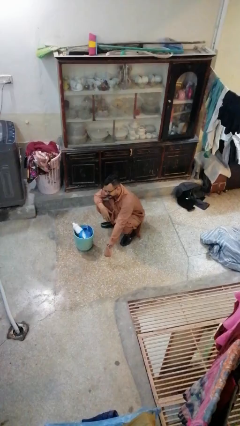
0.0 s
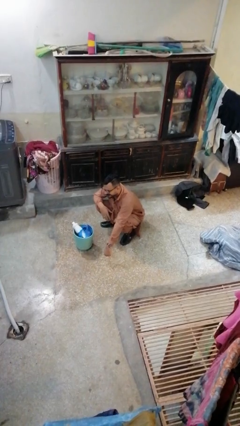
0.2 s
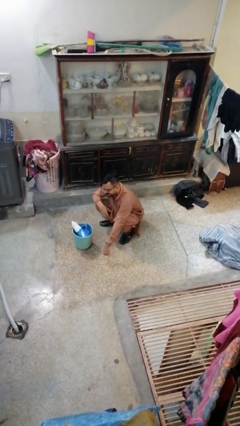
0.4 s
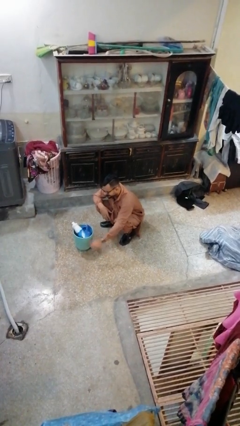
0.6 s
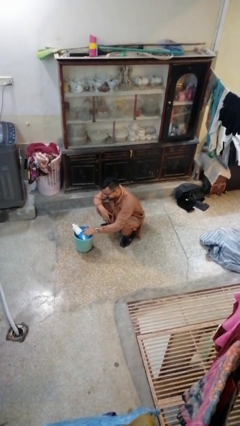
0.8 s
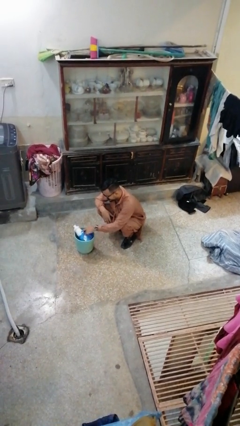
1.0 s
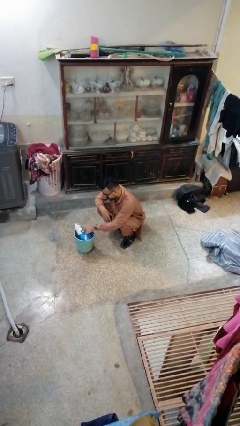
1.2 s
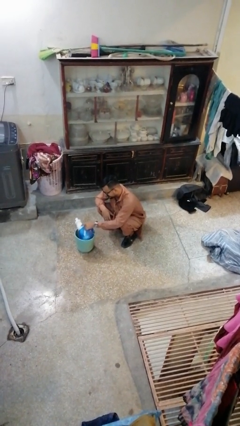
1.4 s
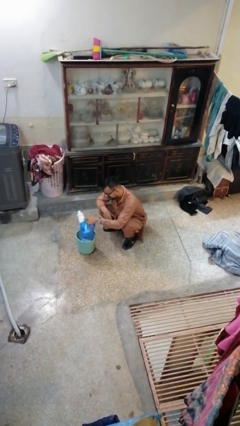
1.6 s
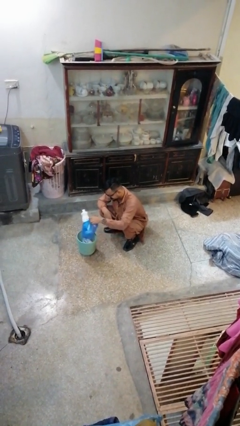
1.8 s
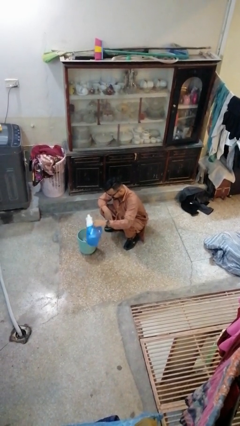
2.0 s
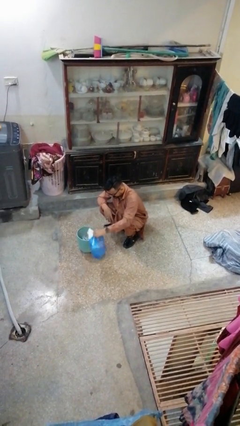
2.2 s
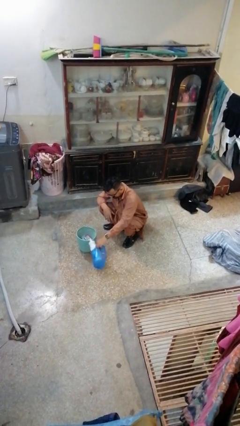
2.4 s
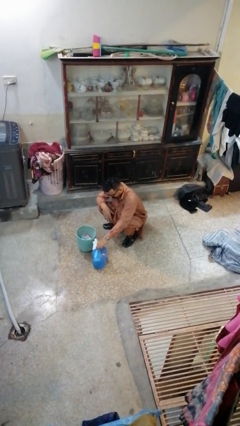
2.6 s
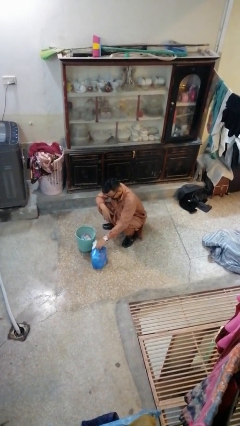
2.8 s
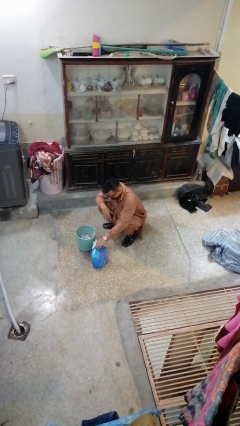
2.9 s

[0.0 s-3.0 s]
person removes trashbag from trashcan

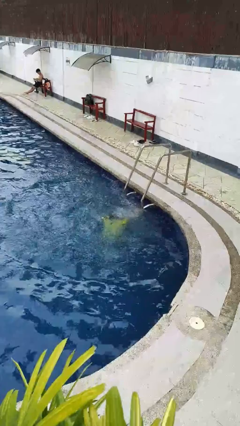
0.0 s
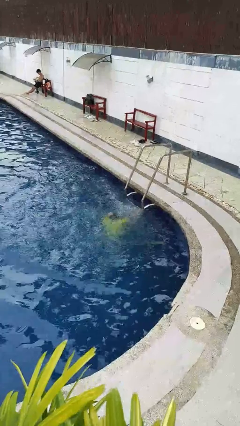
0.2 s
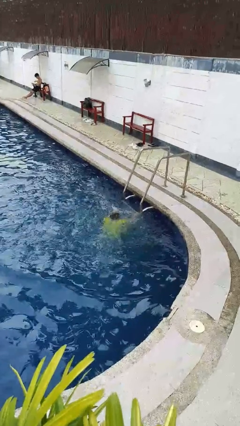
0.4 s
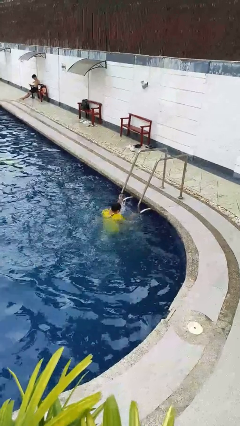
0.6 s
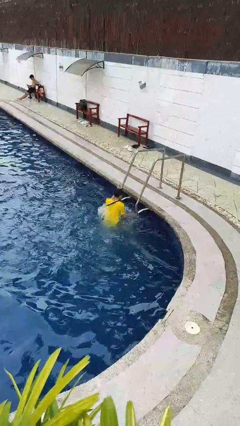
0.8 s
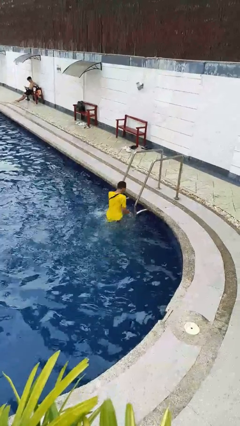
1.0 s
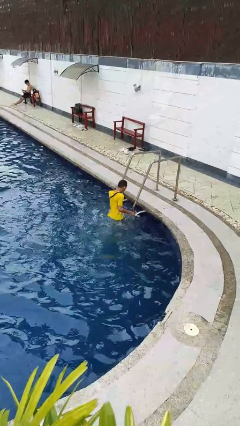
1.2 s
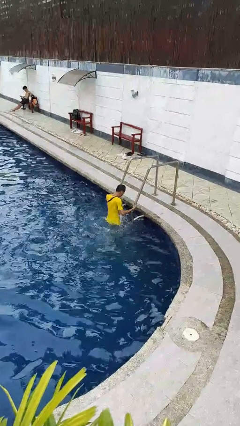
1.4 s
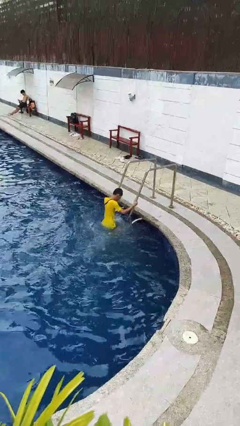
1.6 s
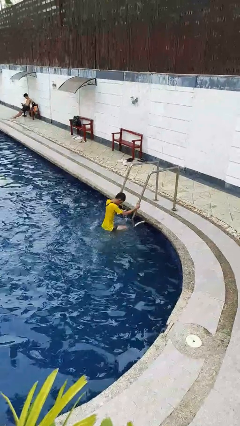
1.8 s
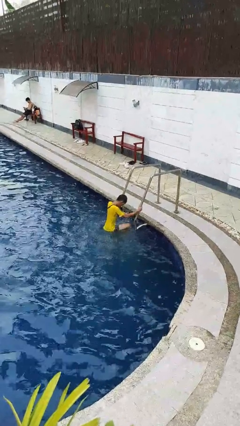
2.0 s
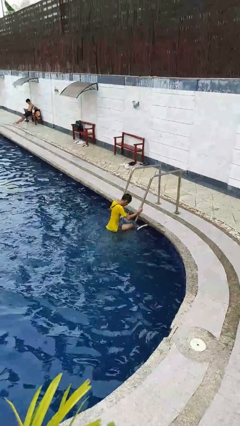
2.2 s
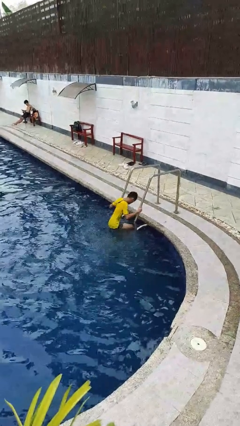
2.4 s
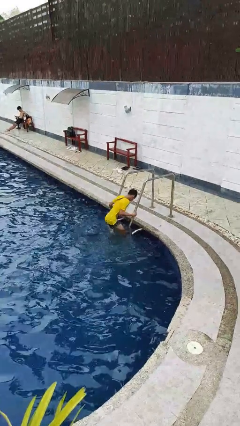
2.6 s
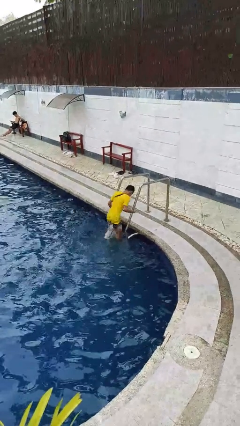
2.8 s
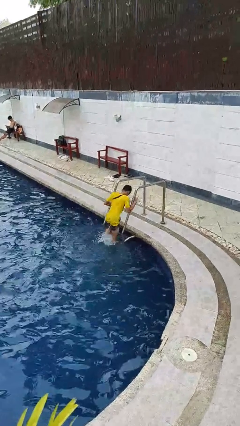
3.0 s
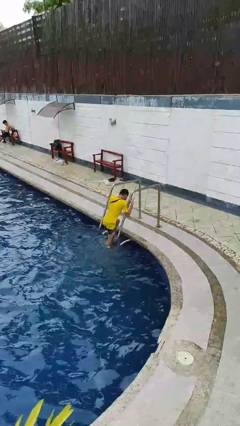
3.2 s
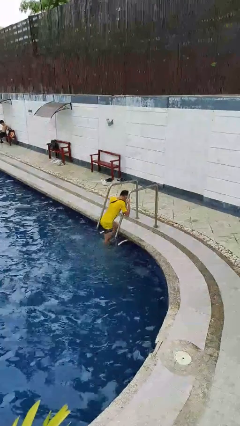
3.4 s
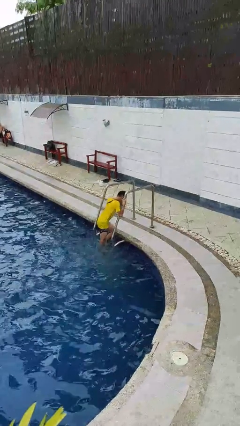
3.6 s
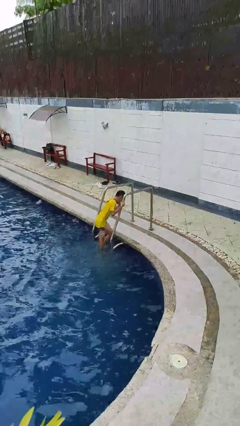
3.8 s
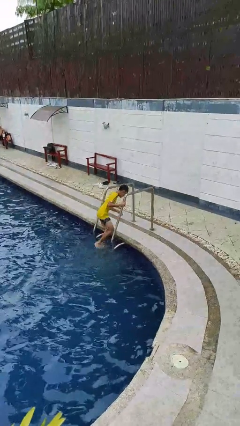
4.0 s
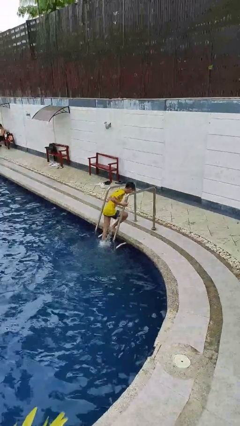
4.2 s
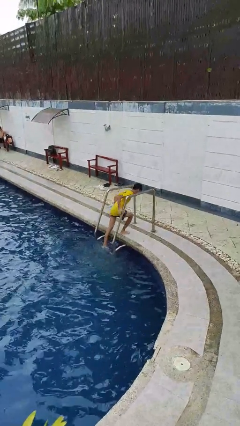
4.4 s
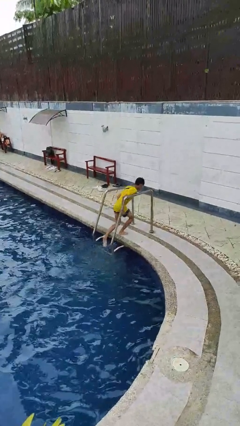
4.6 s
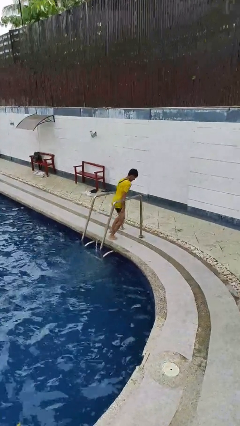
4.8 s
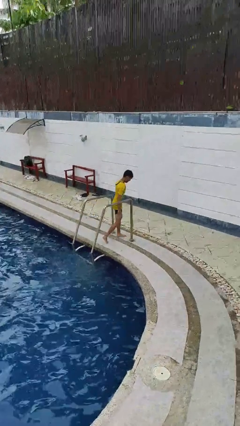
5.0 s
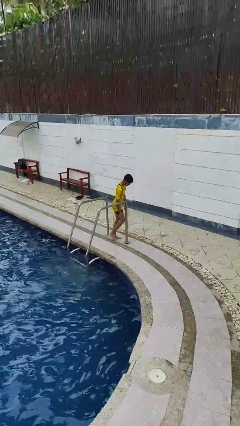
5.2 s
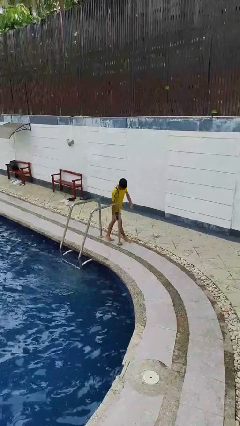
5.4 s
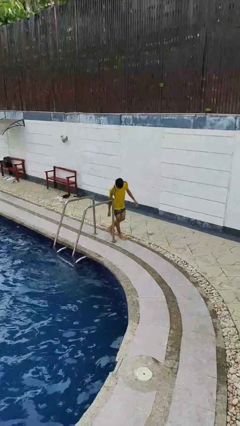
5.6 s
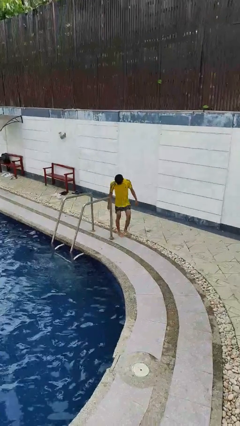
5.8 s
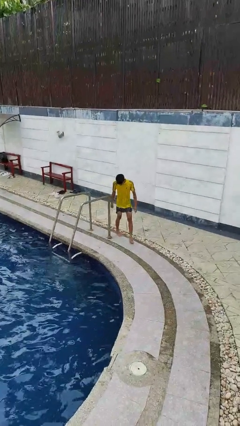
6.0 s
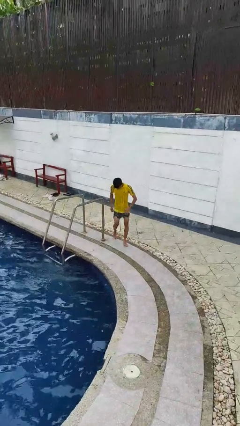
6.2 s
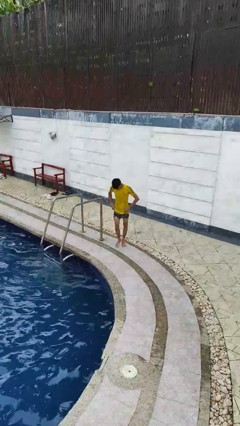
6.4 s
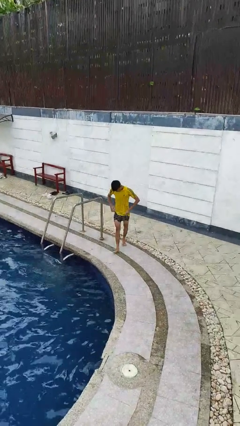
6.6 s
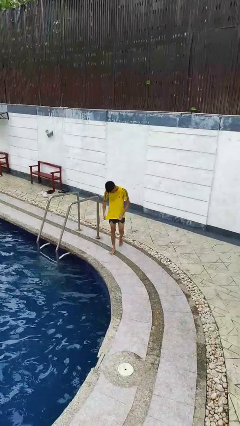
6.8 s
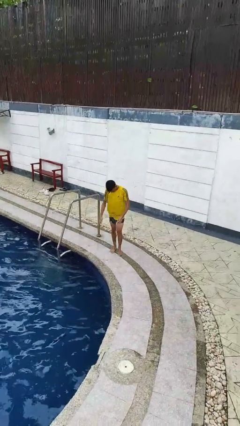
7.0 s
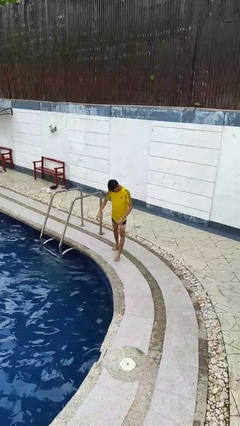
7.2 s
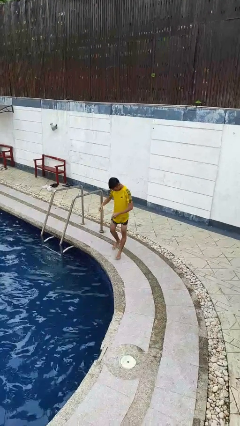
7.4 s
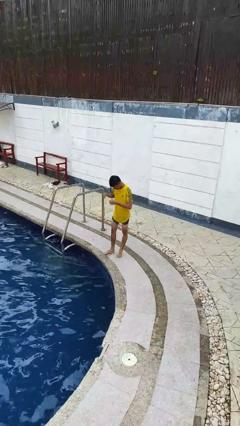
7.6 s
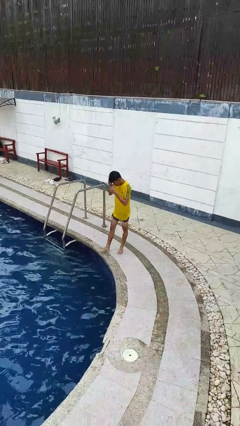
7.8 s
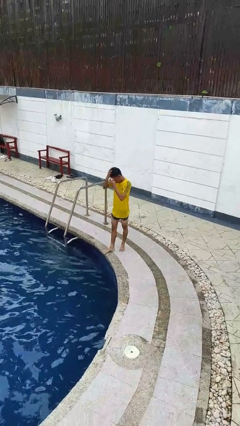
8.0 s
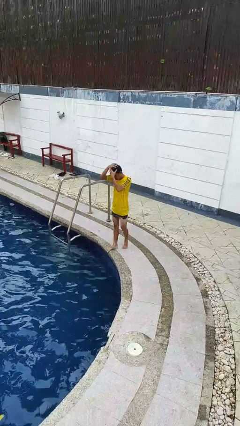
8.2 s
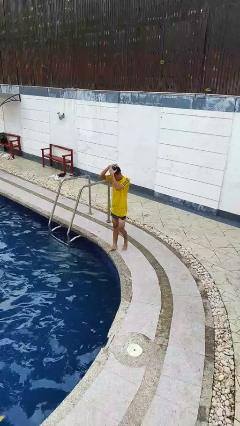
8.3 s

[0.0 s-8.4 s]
person exits pool

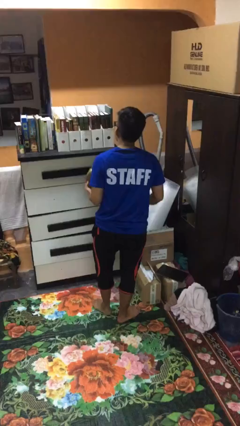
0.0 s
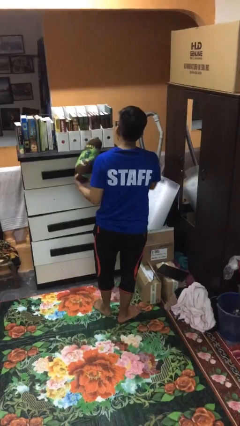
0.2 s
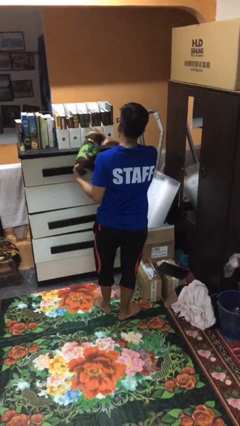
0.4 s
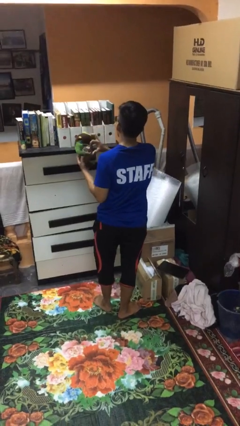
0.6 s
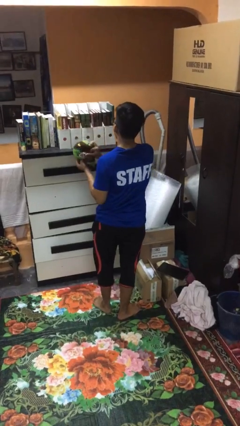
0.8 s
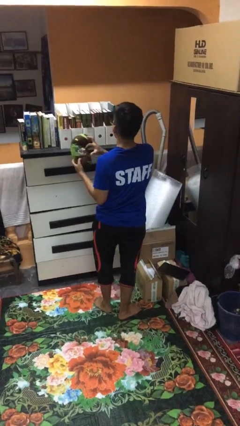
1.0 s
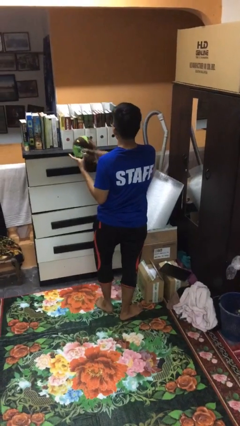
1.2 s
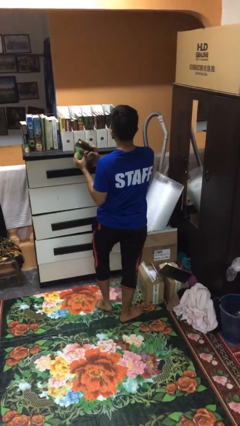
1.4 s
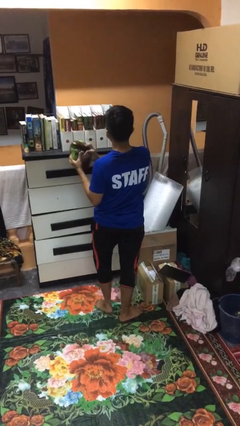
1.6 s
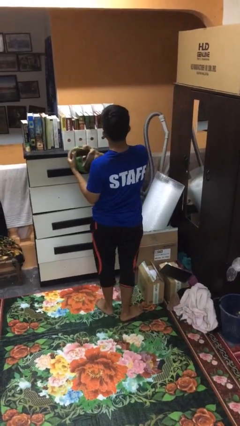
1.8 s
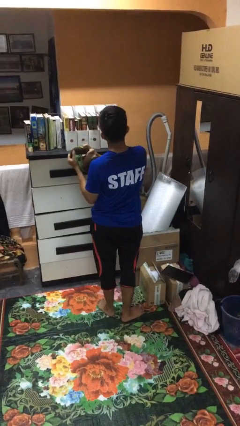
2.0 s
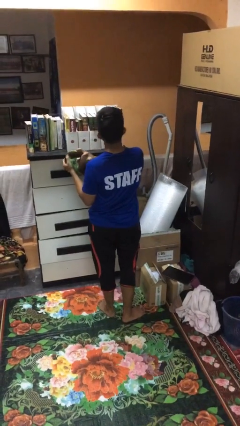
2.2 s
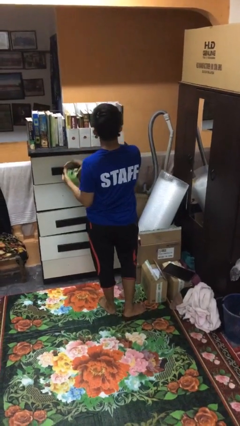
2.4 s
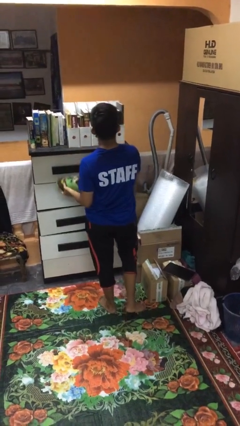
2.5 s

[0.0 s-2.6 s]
person squeezes object

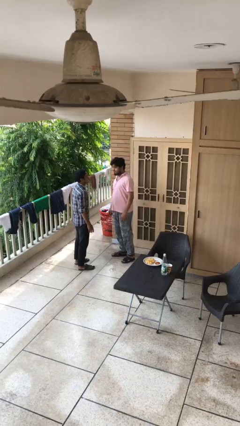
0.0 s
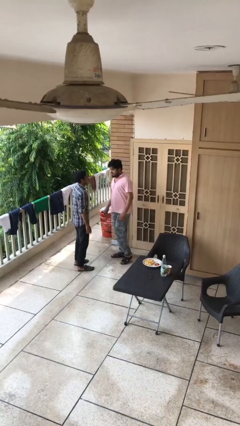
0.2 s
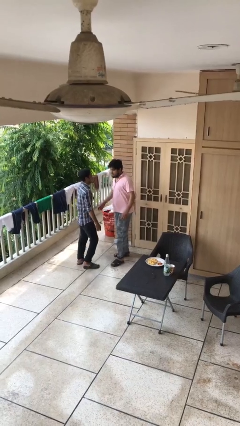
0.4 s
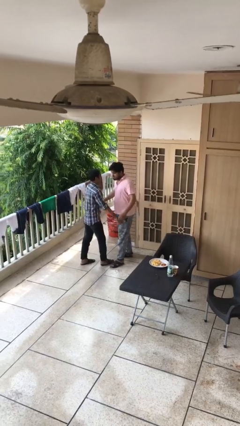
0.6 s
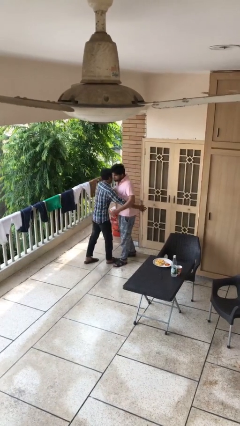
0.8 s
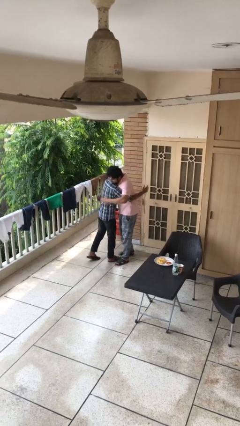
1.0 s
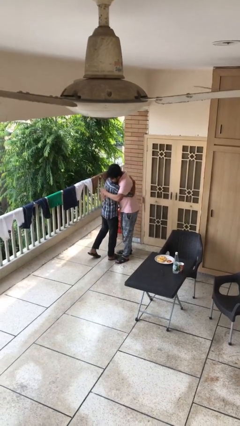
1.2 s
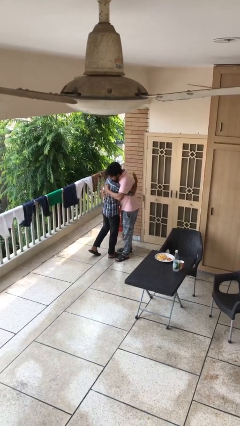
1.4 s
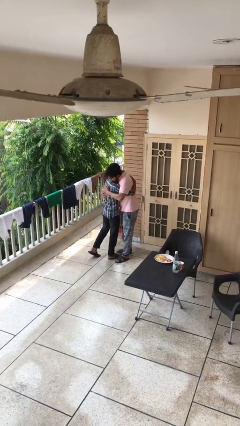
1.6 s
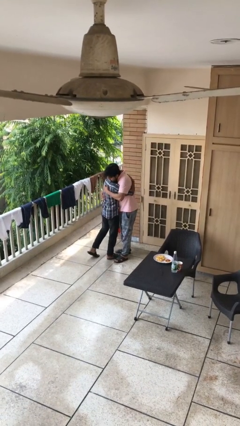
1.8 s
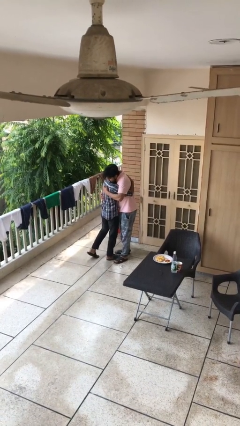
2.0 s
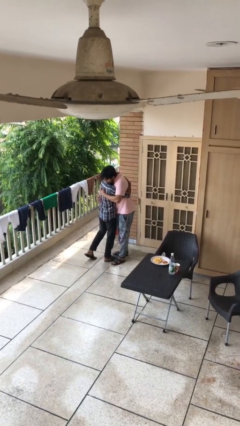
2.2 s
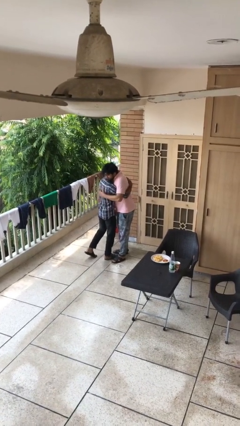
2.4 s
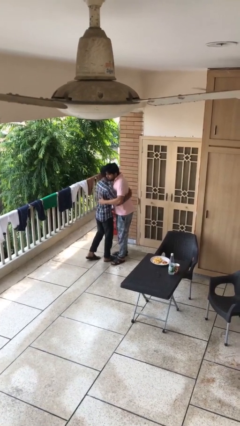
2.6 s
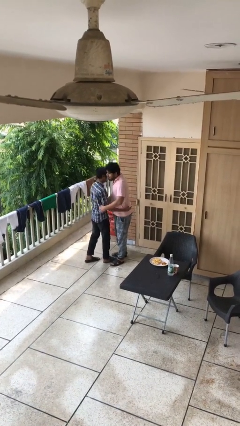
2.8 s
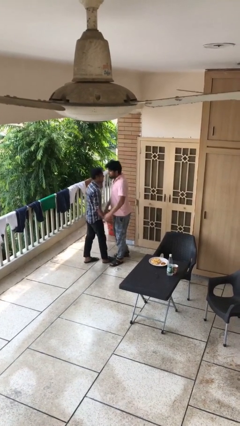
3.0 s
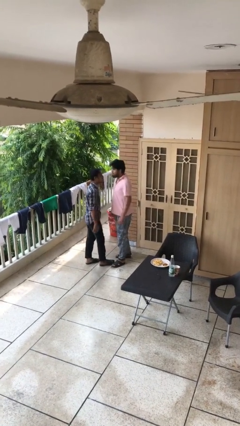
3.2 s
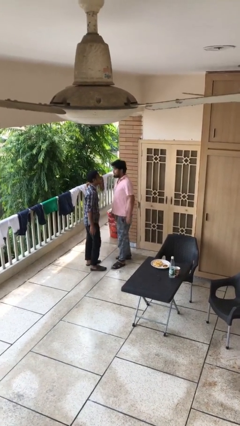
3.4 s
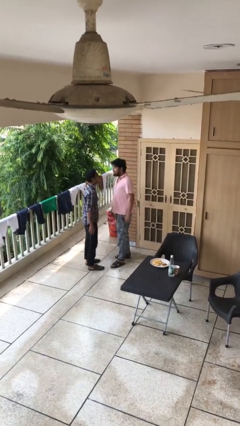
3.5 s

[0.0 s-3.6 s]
person embraces person

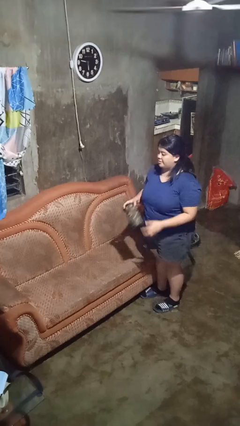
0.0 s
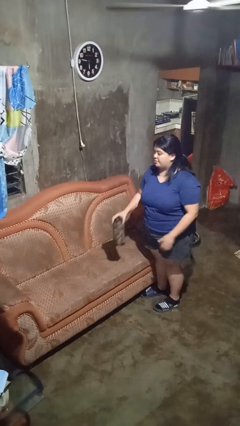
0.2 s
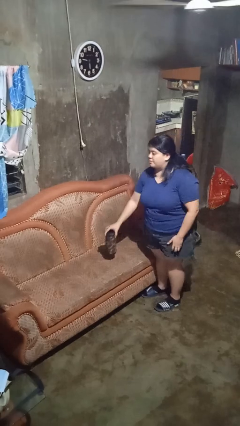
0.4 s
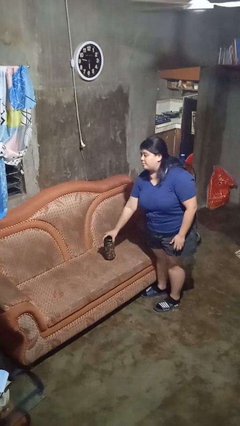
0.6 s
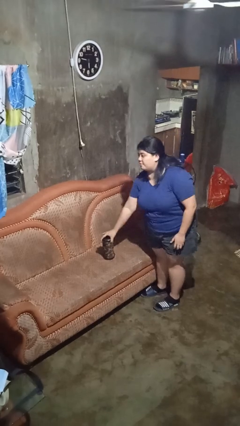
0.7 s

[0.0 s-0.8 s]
person puts down object on couch
